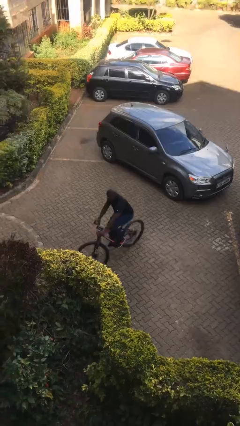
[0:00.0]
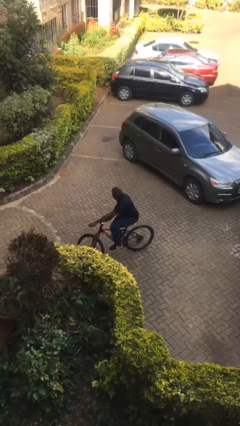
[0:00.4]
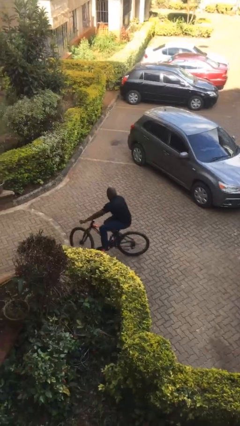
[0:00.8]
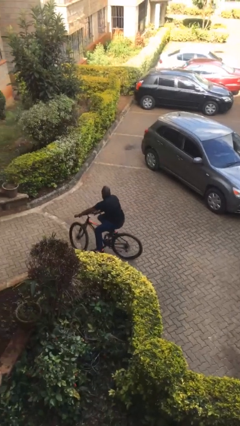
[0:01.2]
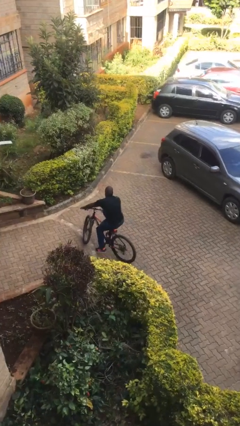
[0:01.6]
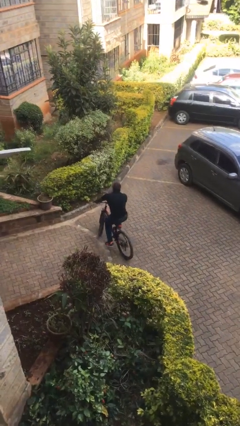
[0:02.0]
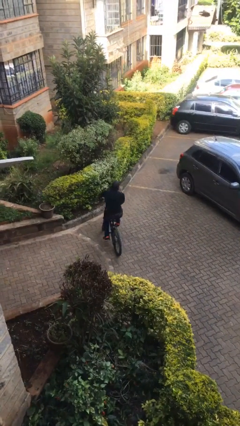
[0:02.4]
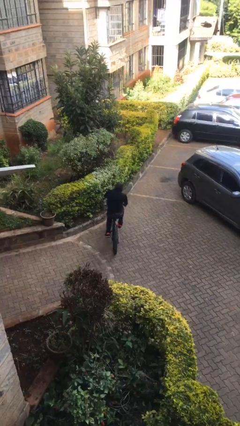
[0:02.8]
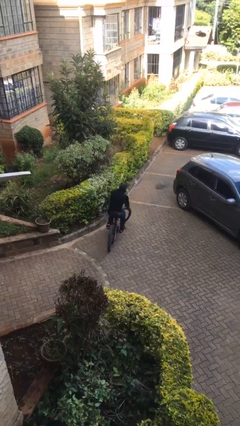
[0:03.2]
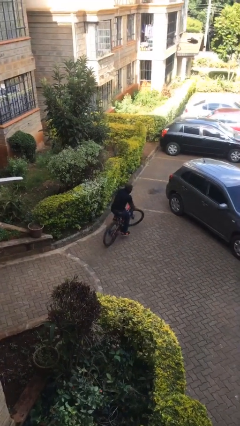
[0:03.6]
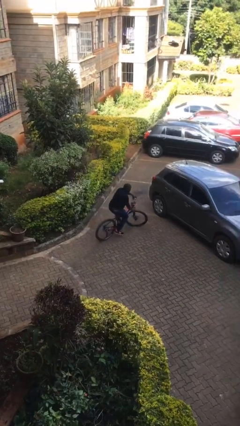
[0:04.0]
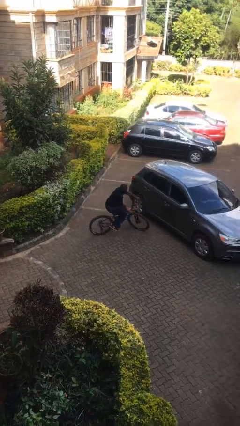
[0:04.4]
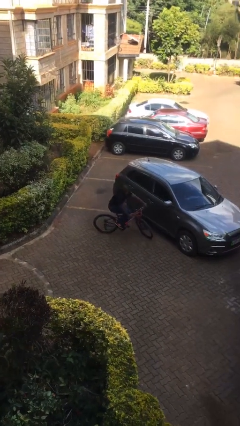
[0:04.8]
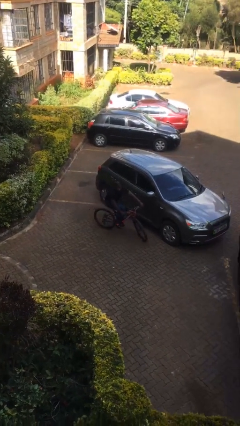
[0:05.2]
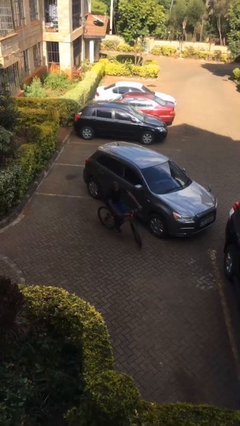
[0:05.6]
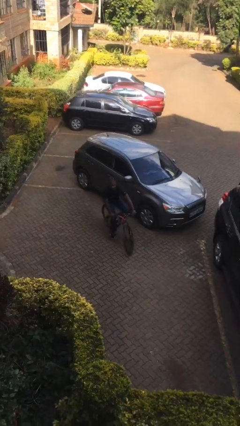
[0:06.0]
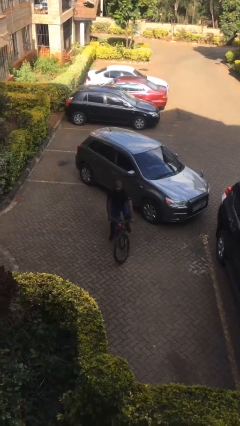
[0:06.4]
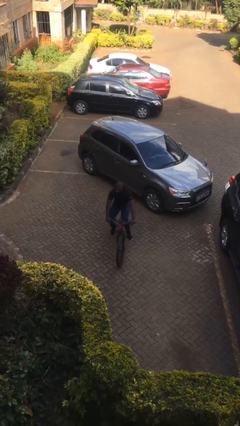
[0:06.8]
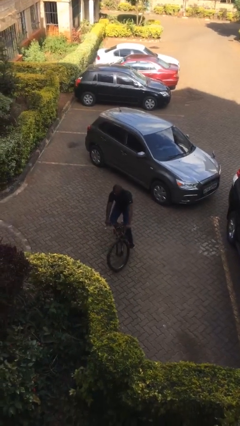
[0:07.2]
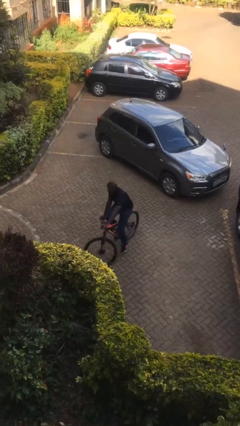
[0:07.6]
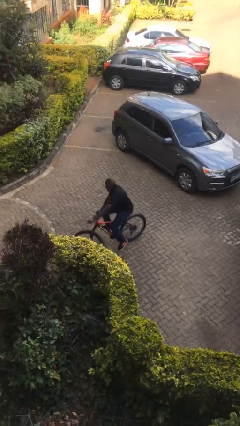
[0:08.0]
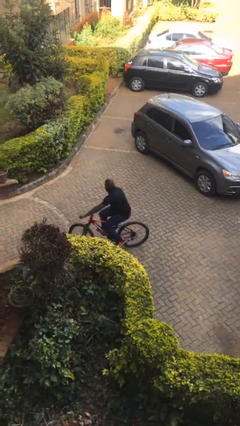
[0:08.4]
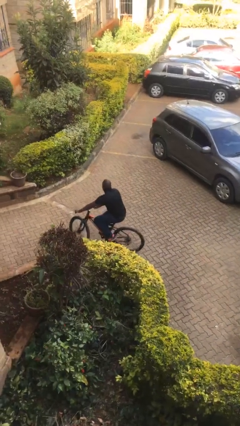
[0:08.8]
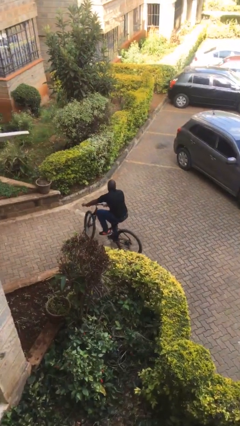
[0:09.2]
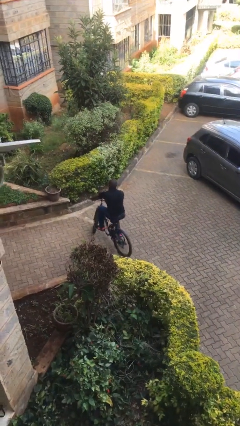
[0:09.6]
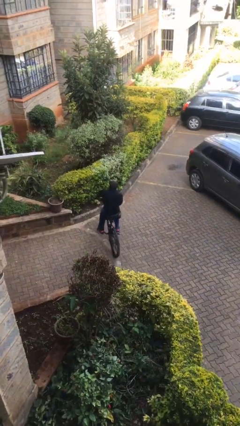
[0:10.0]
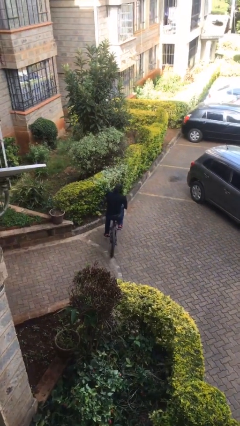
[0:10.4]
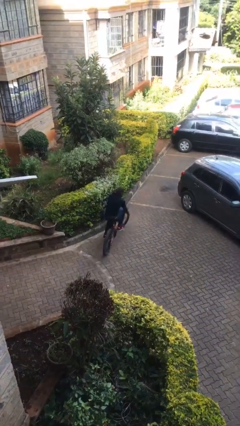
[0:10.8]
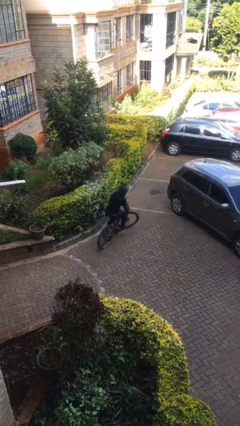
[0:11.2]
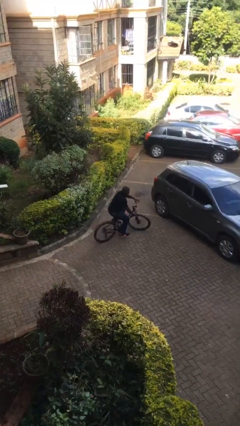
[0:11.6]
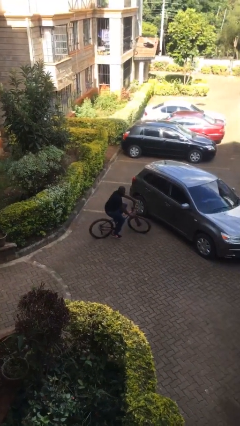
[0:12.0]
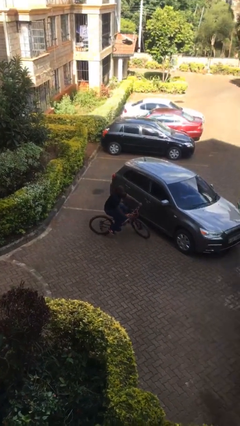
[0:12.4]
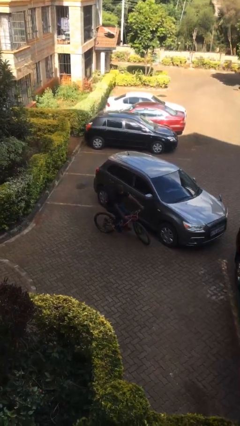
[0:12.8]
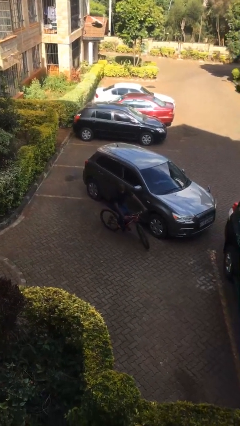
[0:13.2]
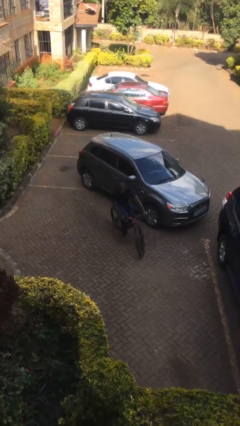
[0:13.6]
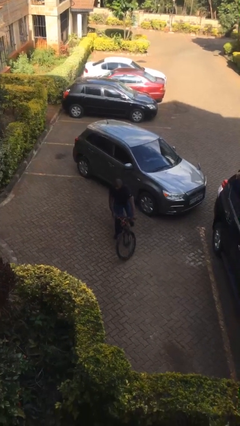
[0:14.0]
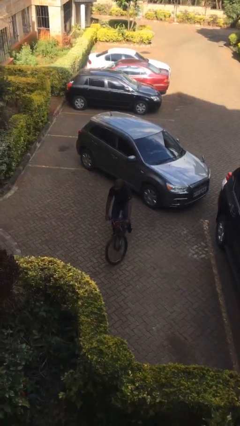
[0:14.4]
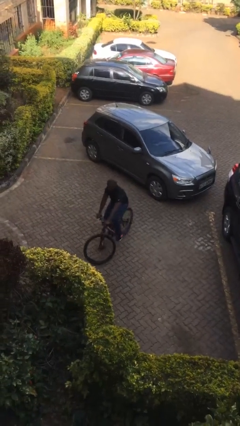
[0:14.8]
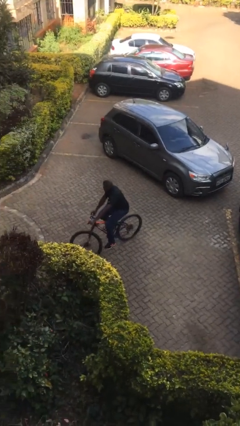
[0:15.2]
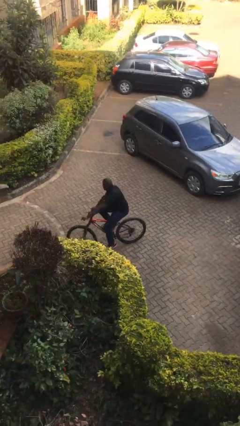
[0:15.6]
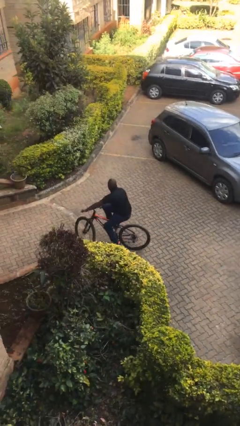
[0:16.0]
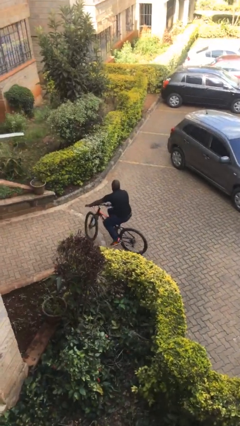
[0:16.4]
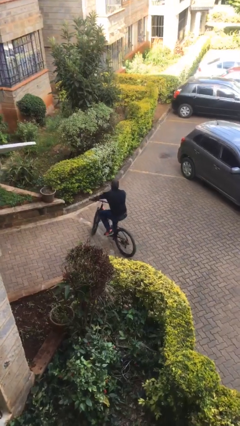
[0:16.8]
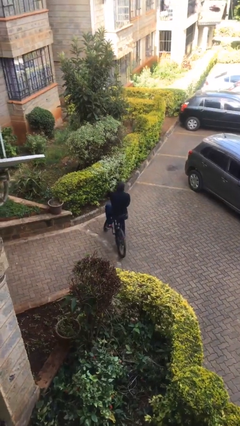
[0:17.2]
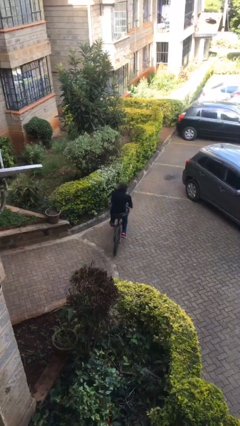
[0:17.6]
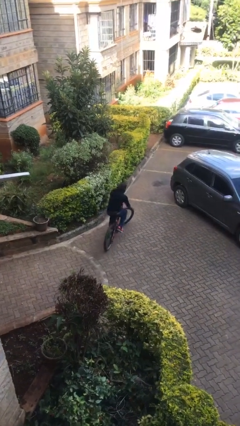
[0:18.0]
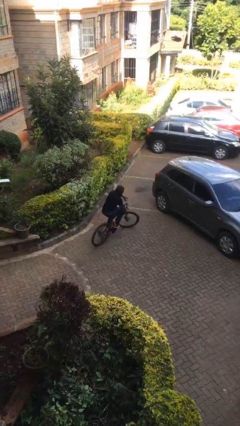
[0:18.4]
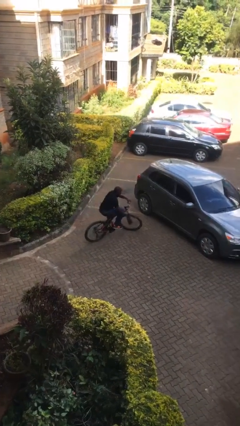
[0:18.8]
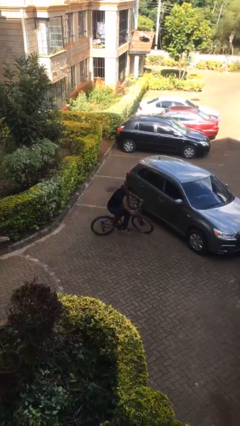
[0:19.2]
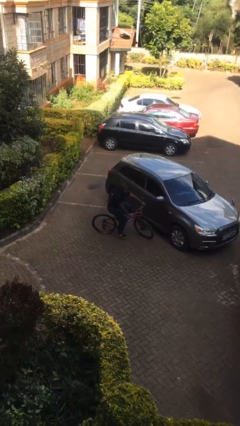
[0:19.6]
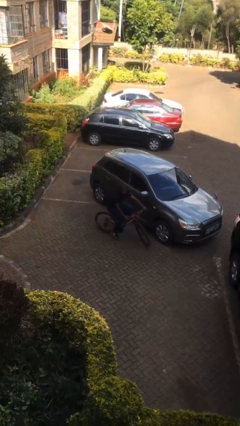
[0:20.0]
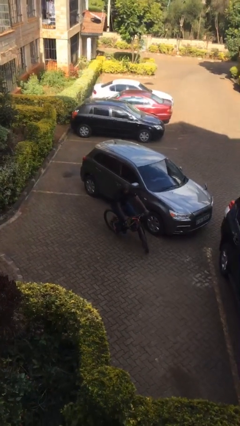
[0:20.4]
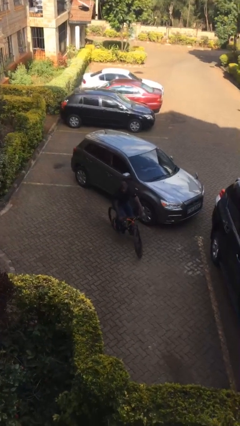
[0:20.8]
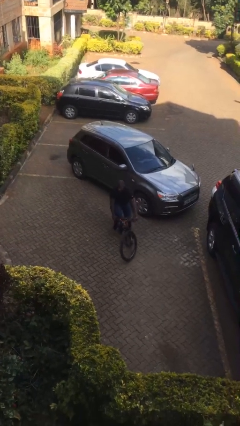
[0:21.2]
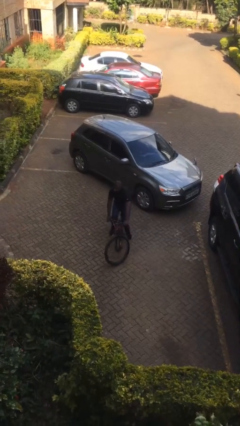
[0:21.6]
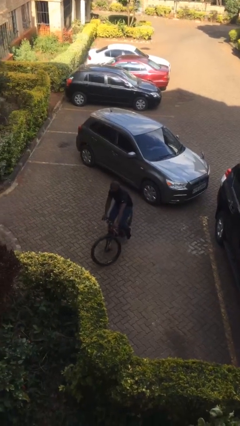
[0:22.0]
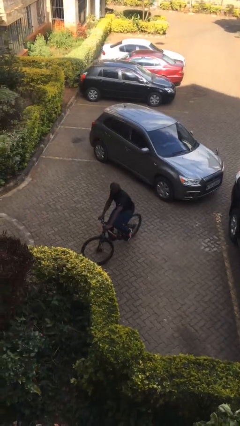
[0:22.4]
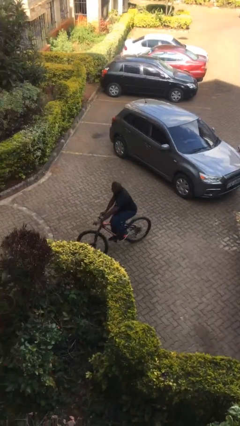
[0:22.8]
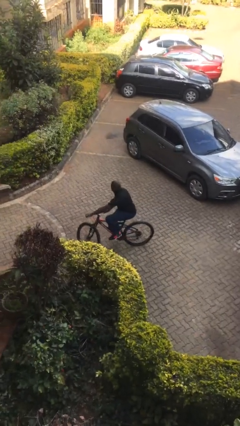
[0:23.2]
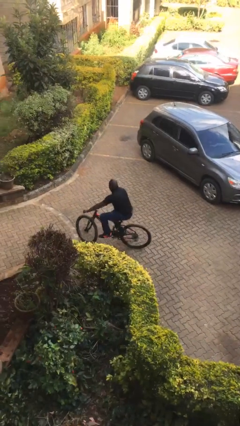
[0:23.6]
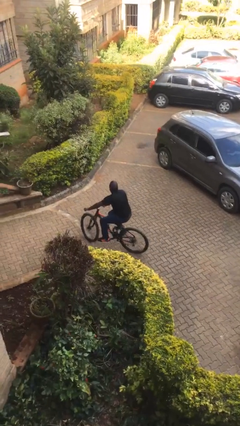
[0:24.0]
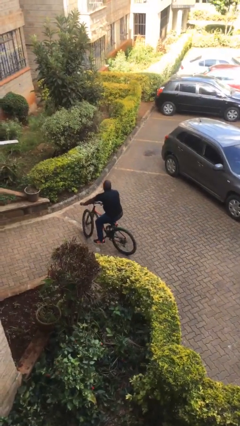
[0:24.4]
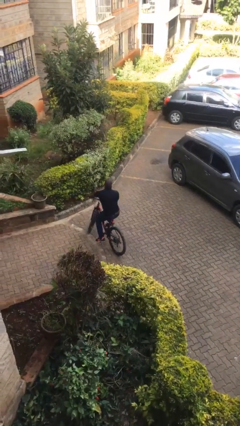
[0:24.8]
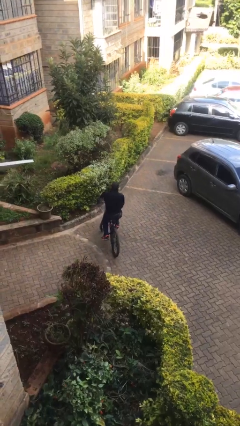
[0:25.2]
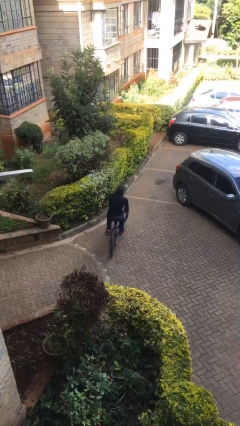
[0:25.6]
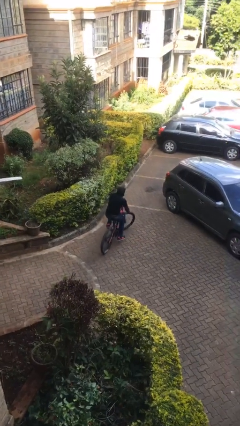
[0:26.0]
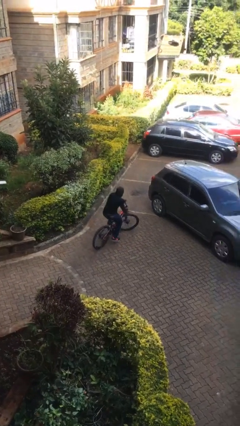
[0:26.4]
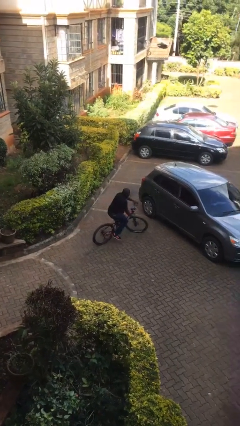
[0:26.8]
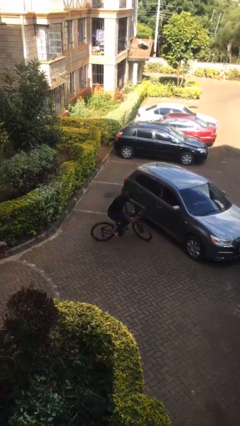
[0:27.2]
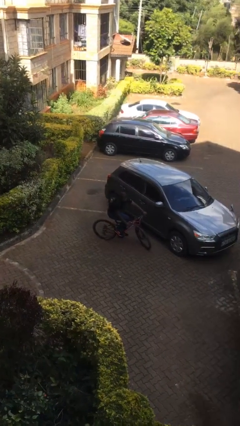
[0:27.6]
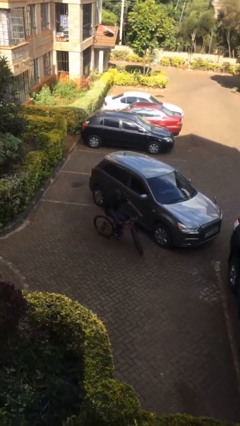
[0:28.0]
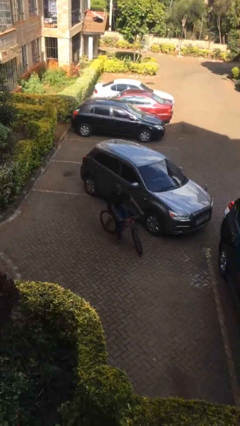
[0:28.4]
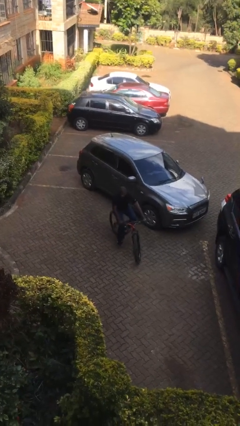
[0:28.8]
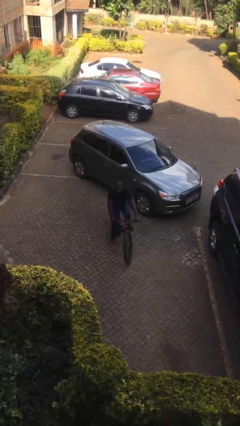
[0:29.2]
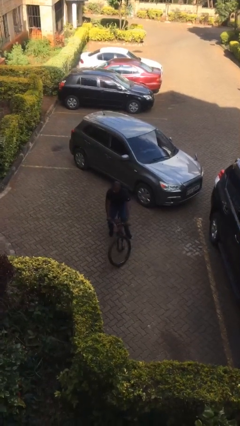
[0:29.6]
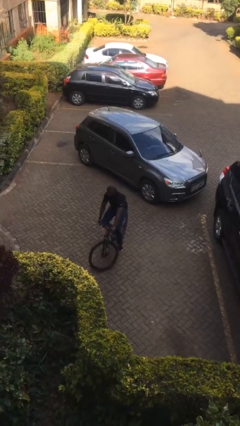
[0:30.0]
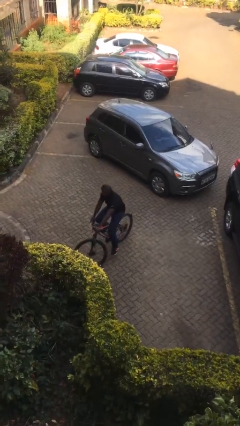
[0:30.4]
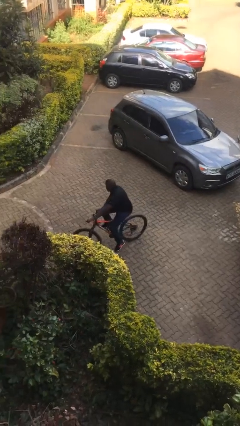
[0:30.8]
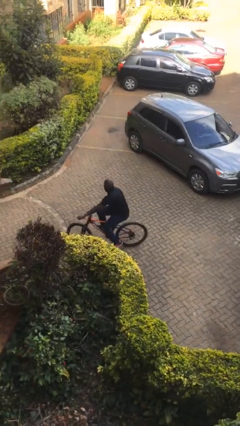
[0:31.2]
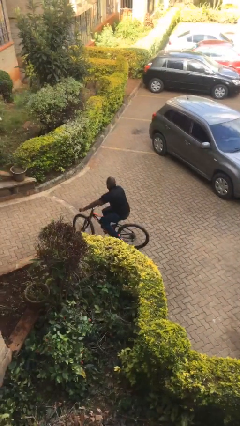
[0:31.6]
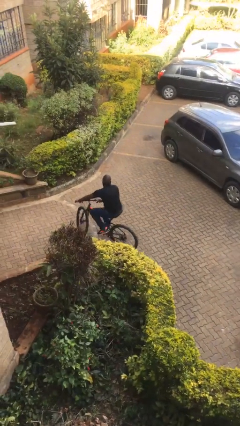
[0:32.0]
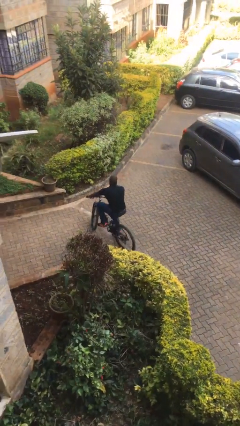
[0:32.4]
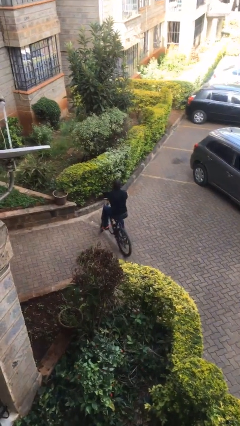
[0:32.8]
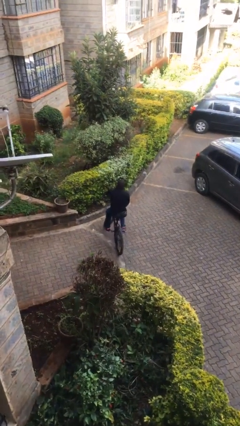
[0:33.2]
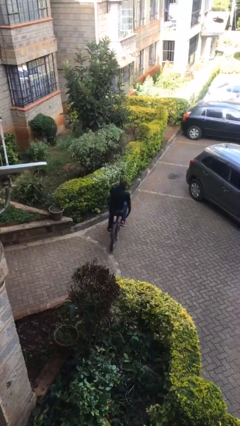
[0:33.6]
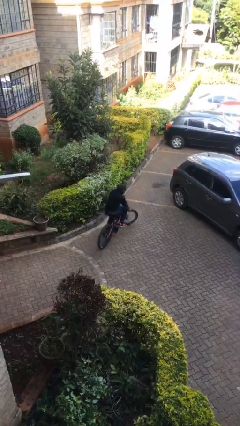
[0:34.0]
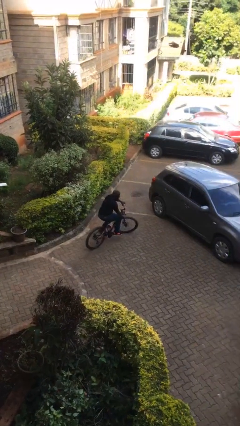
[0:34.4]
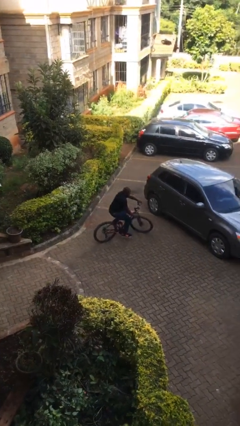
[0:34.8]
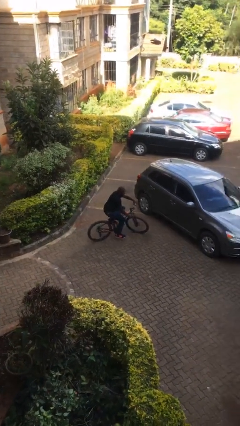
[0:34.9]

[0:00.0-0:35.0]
person rides bicycle

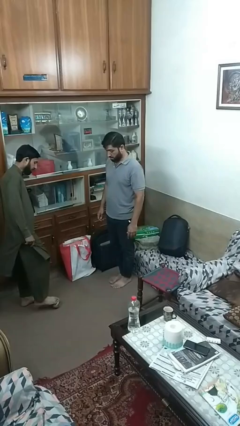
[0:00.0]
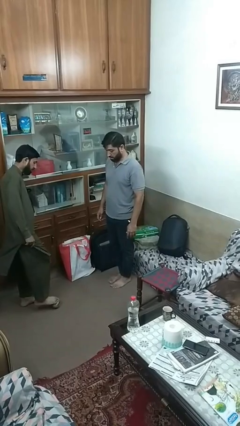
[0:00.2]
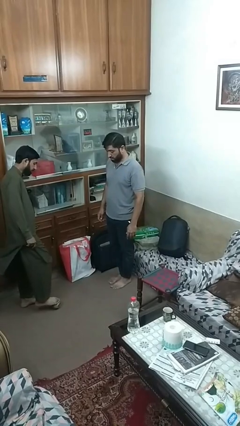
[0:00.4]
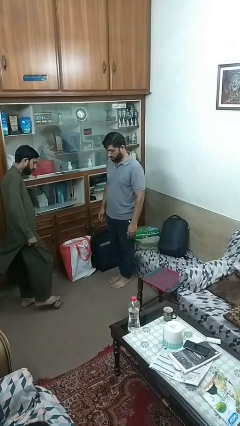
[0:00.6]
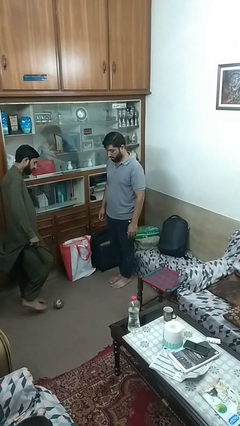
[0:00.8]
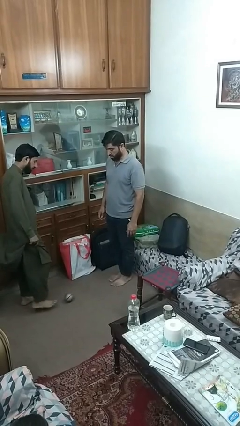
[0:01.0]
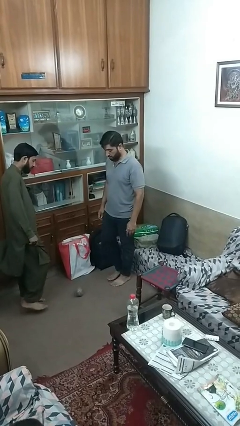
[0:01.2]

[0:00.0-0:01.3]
person kicks object to person
